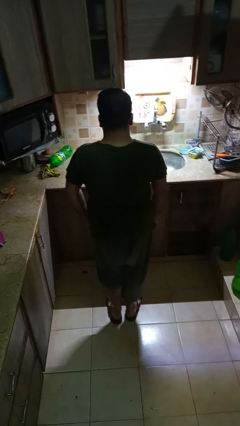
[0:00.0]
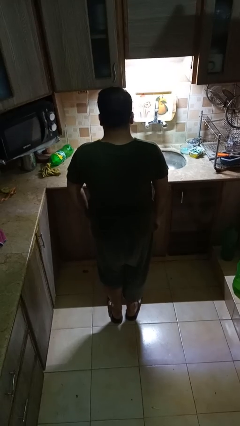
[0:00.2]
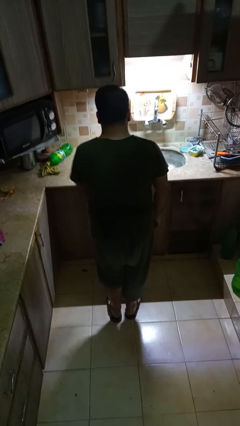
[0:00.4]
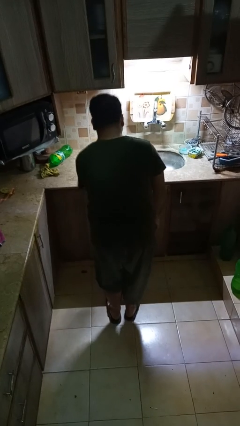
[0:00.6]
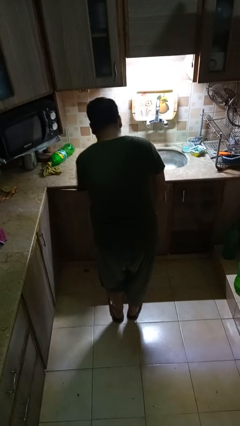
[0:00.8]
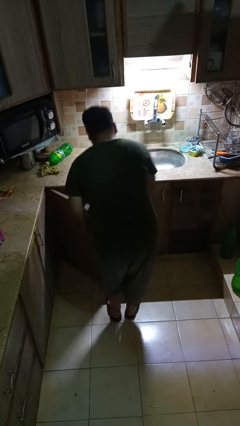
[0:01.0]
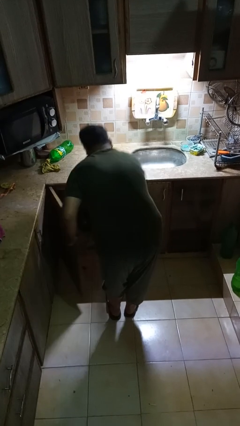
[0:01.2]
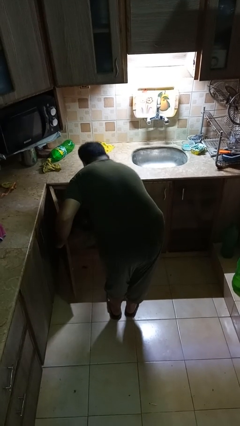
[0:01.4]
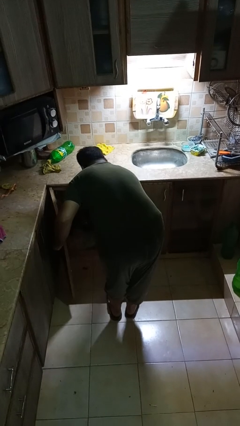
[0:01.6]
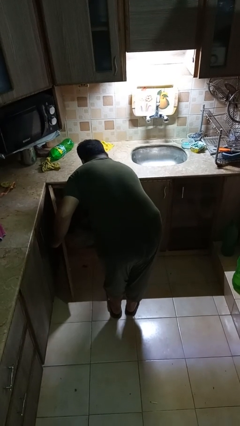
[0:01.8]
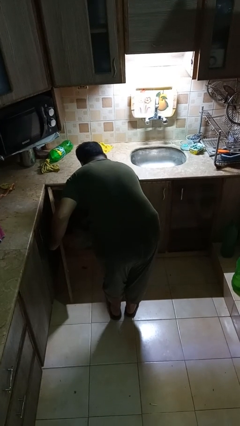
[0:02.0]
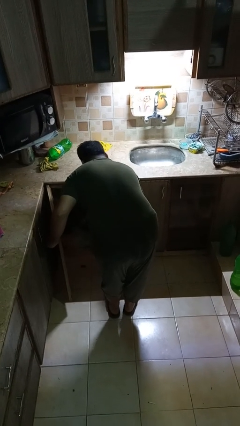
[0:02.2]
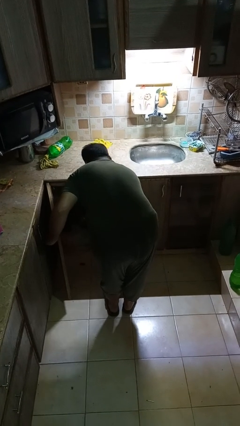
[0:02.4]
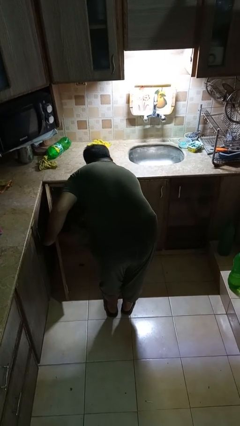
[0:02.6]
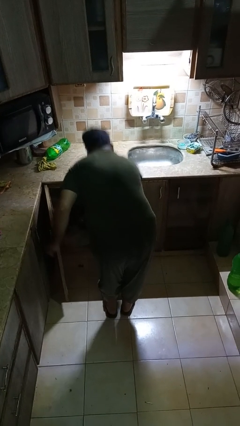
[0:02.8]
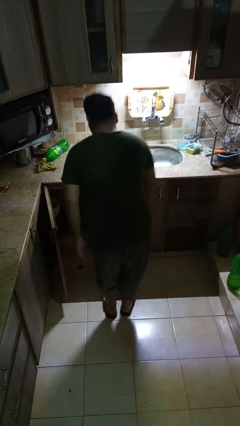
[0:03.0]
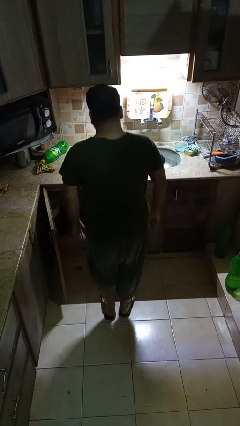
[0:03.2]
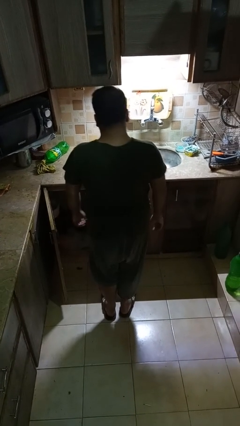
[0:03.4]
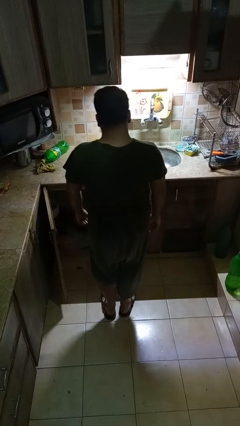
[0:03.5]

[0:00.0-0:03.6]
person takes object from cabinet

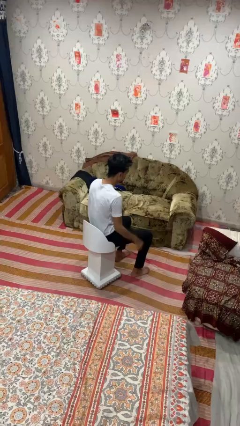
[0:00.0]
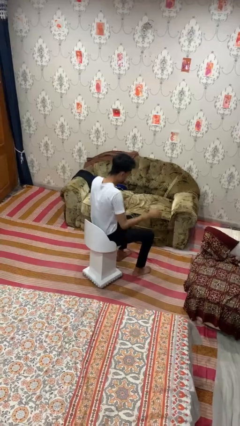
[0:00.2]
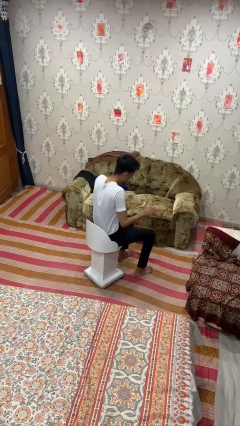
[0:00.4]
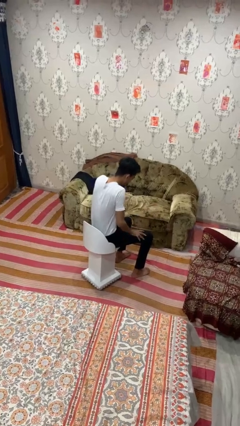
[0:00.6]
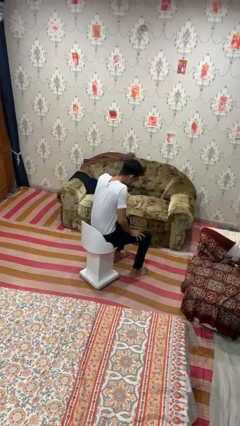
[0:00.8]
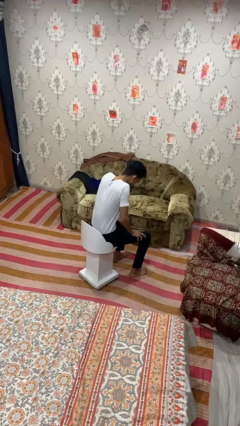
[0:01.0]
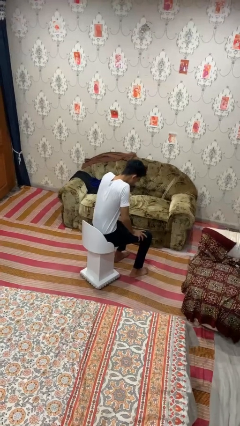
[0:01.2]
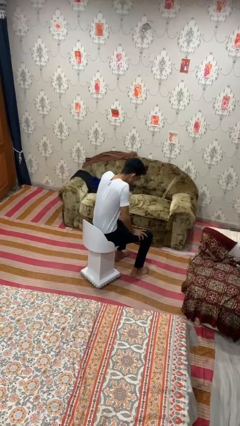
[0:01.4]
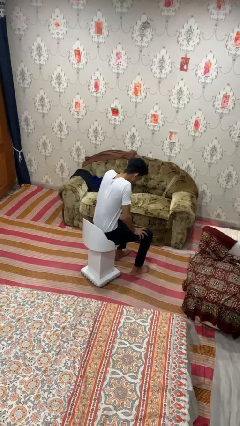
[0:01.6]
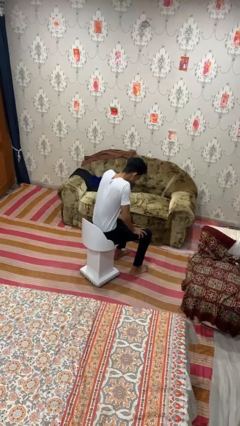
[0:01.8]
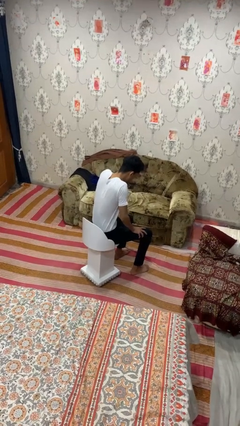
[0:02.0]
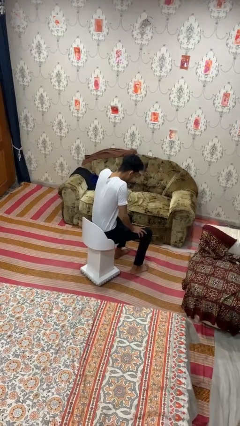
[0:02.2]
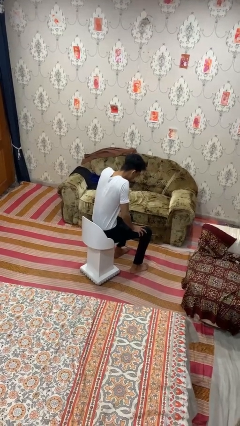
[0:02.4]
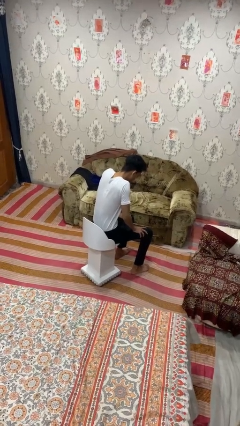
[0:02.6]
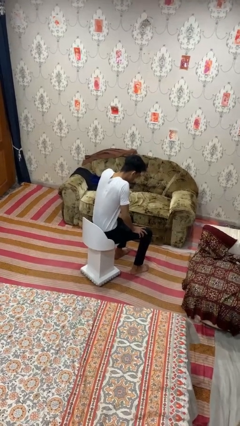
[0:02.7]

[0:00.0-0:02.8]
person slaps hands on thighs

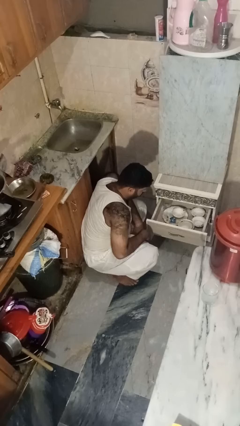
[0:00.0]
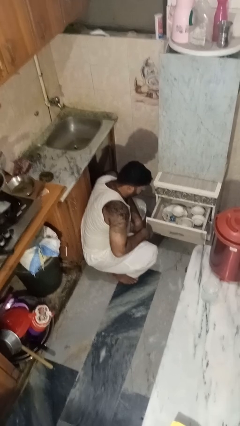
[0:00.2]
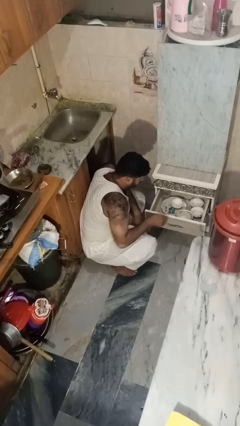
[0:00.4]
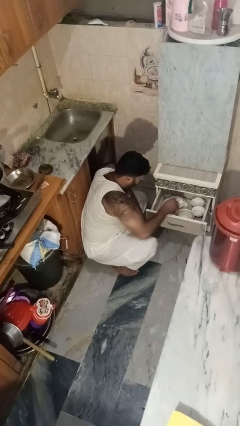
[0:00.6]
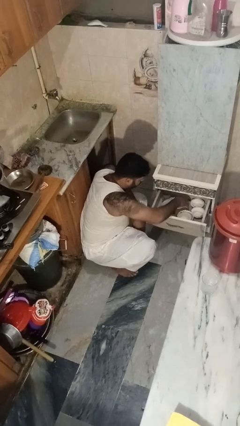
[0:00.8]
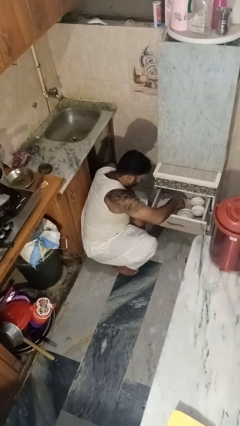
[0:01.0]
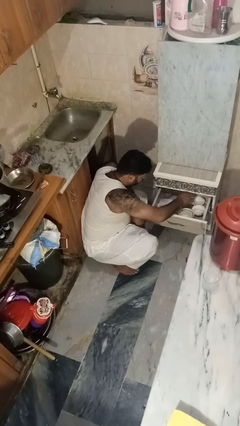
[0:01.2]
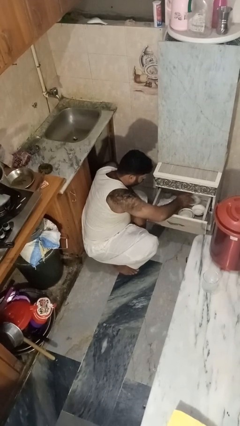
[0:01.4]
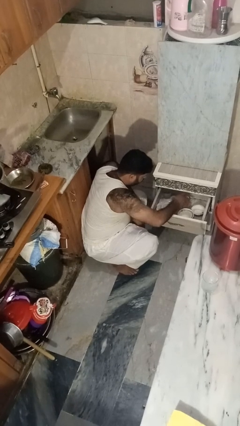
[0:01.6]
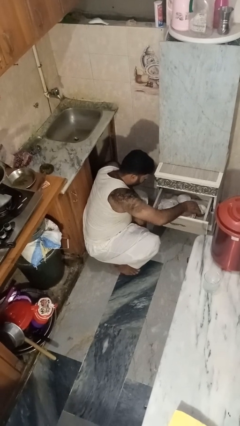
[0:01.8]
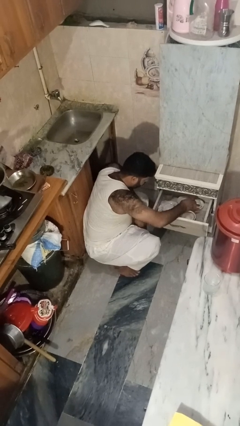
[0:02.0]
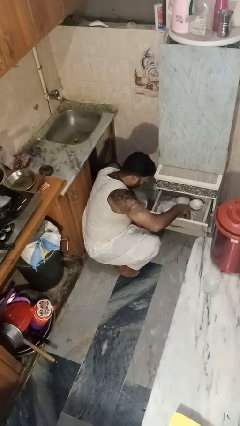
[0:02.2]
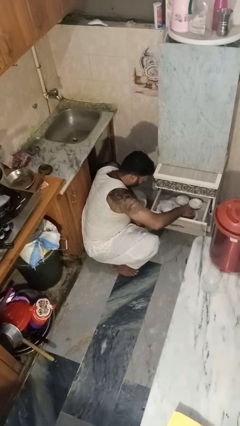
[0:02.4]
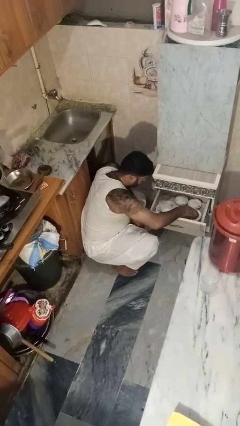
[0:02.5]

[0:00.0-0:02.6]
person searches in kitchen drawer

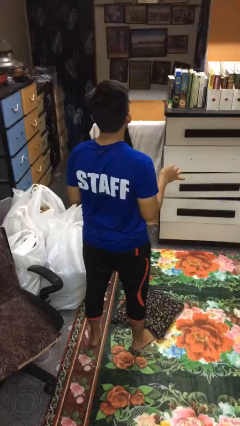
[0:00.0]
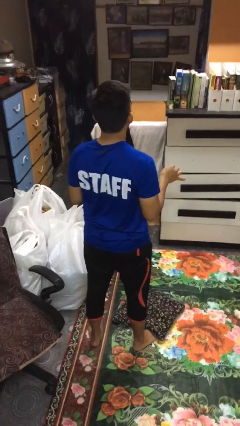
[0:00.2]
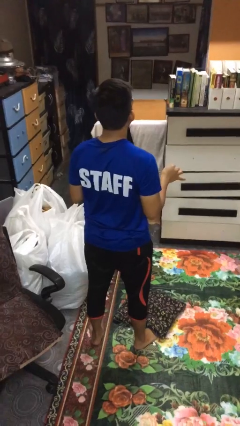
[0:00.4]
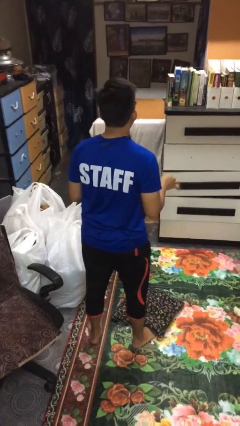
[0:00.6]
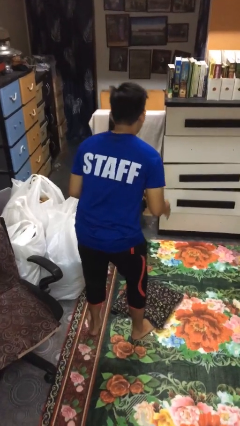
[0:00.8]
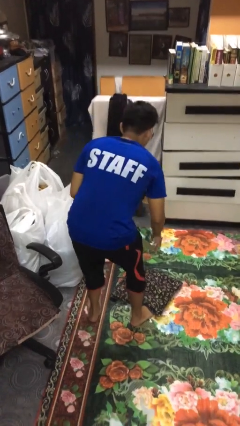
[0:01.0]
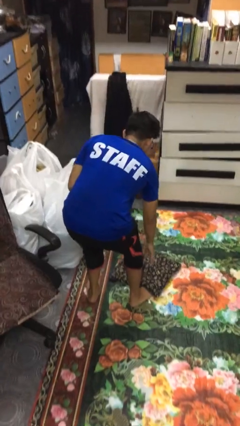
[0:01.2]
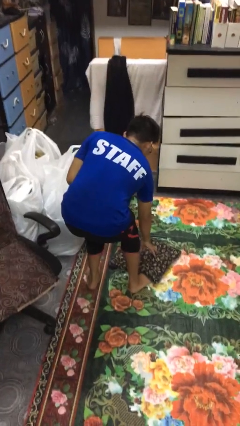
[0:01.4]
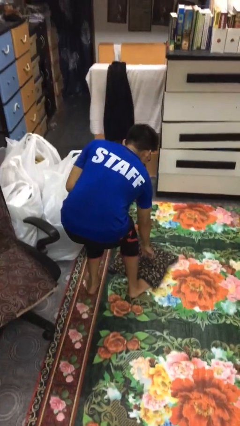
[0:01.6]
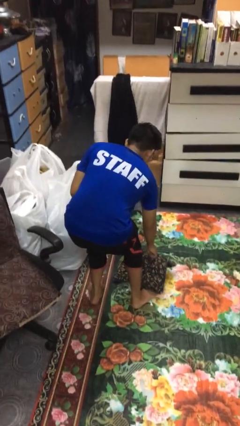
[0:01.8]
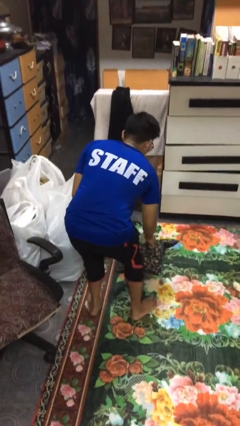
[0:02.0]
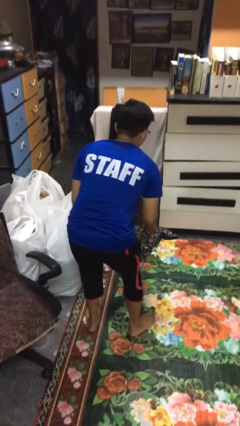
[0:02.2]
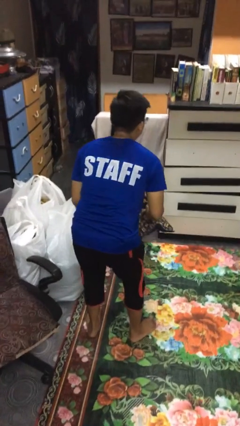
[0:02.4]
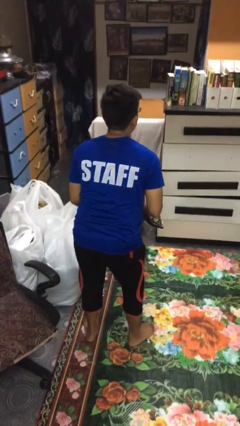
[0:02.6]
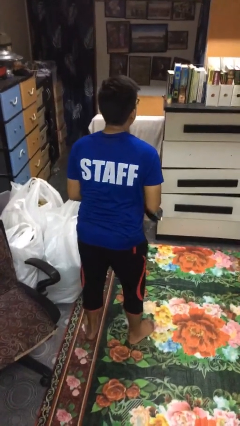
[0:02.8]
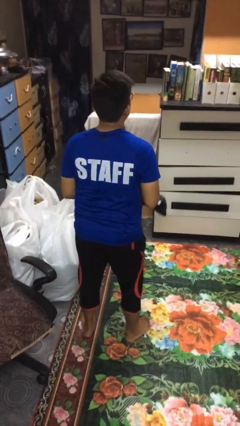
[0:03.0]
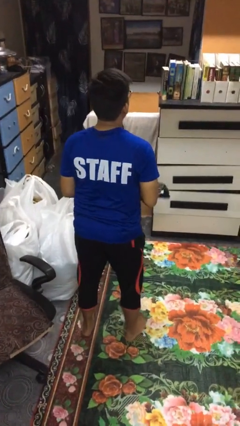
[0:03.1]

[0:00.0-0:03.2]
person picks up object from floor

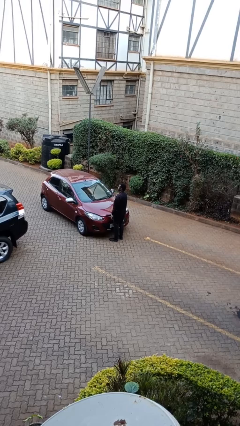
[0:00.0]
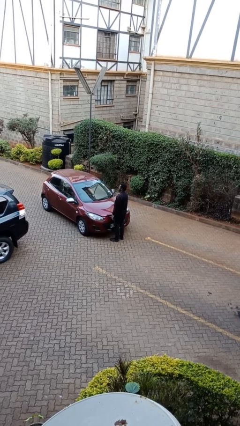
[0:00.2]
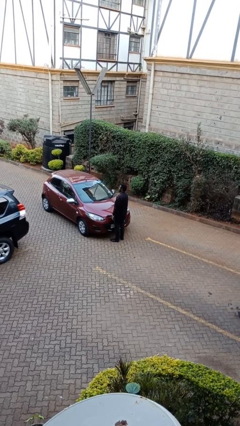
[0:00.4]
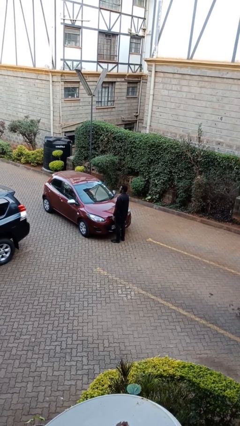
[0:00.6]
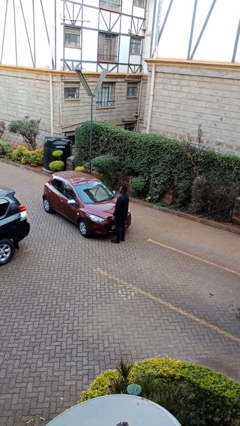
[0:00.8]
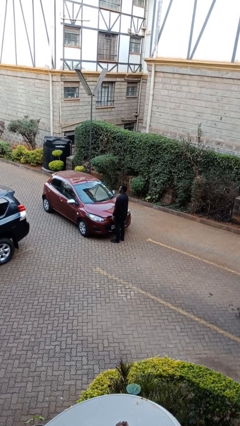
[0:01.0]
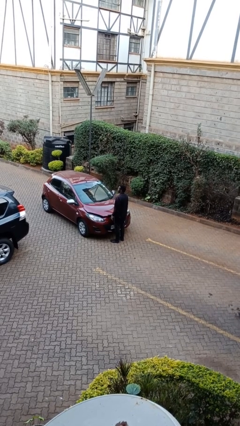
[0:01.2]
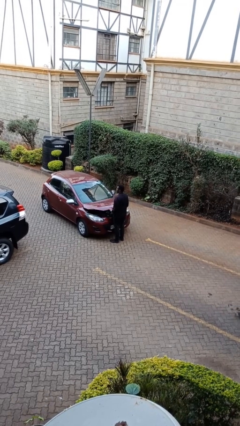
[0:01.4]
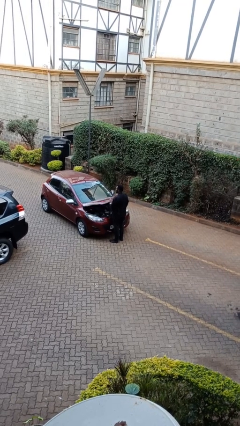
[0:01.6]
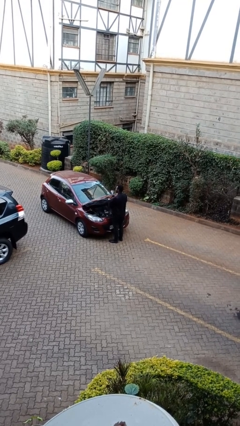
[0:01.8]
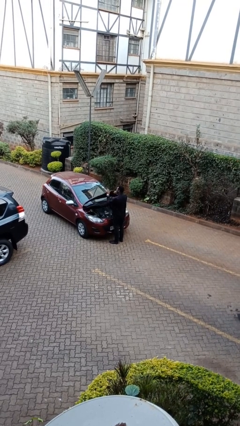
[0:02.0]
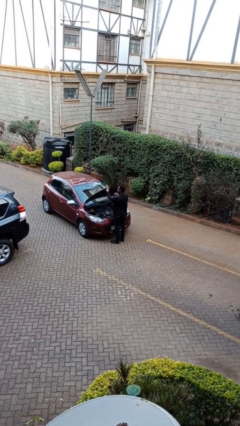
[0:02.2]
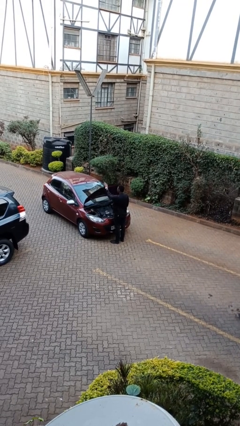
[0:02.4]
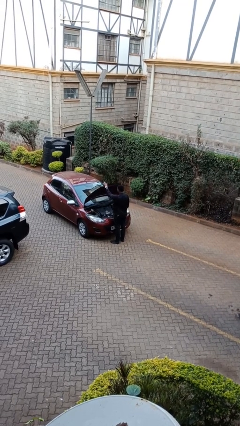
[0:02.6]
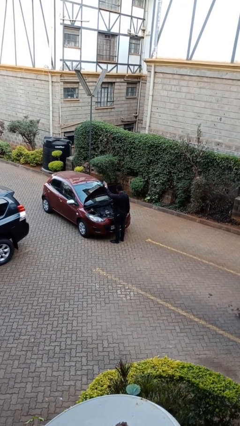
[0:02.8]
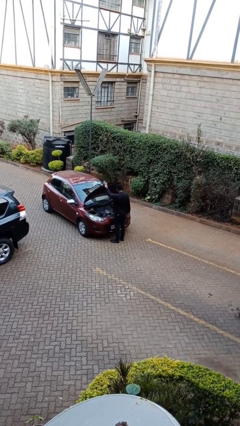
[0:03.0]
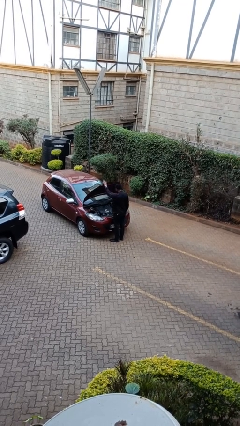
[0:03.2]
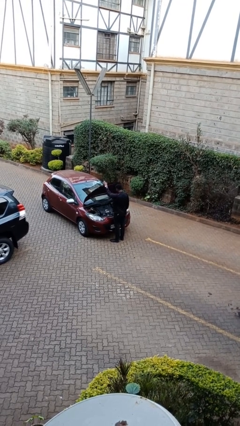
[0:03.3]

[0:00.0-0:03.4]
person opens car hood

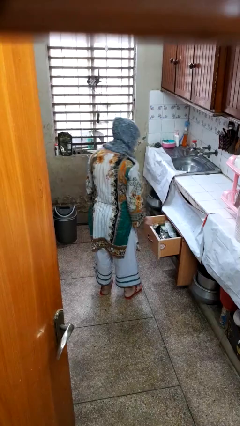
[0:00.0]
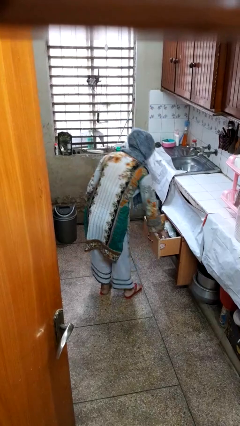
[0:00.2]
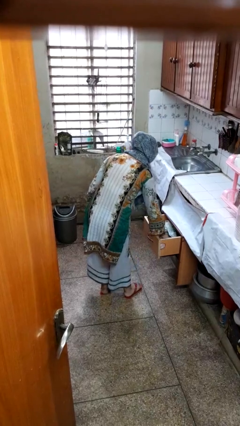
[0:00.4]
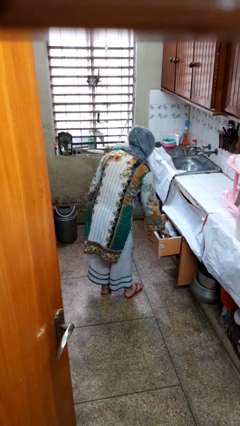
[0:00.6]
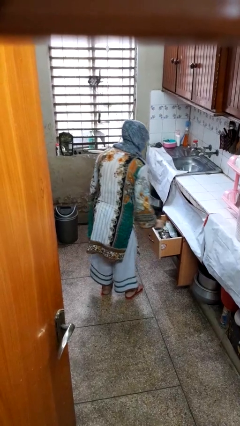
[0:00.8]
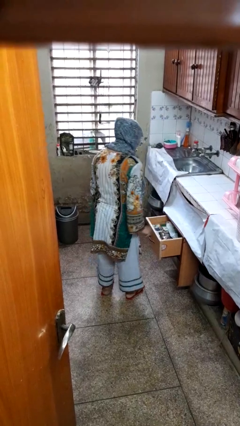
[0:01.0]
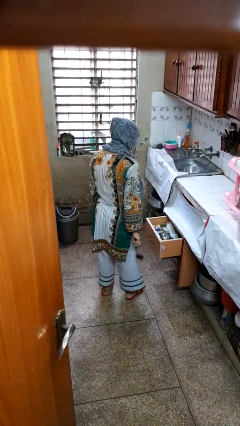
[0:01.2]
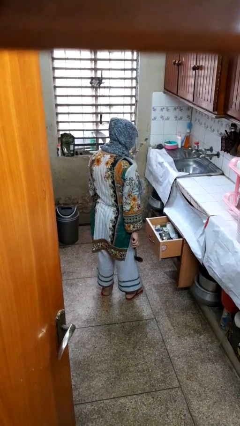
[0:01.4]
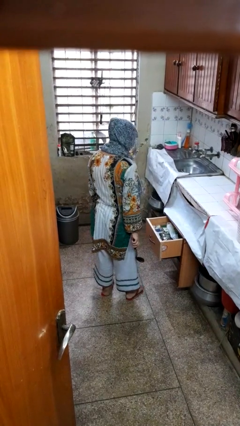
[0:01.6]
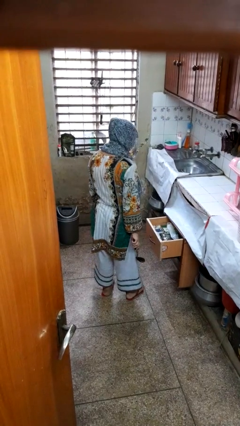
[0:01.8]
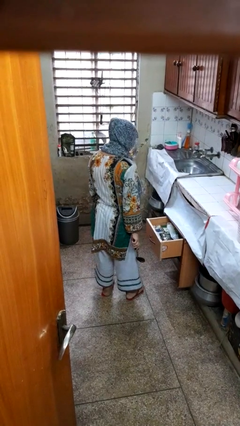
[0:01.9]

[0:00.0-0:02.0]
person takes object from kitchen drawer
